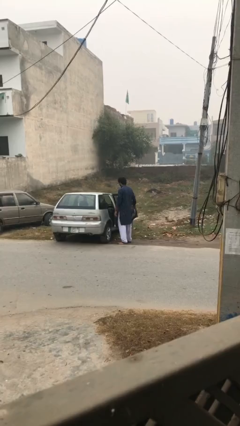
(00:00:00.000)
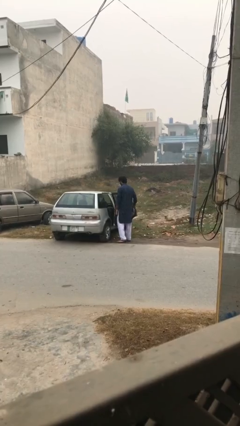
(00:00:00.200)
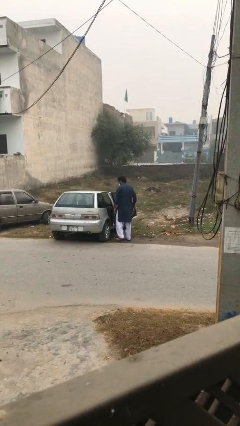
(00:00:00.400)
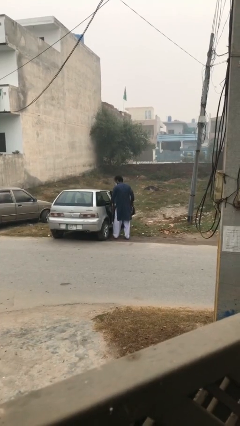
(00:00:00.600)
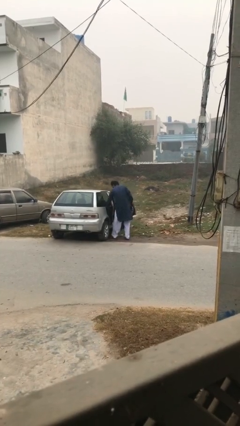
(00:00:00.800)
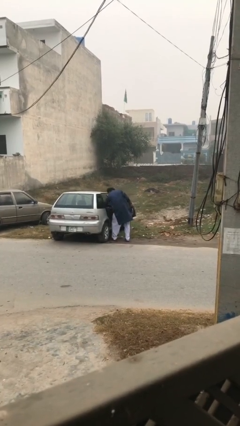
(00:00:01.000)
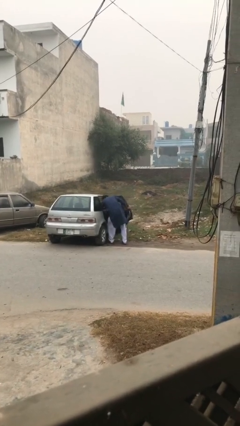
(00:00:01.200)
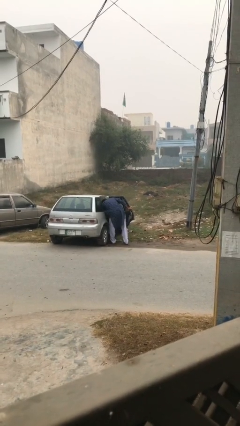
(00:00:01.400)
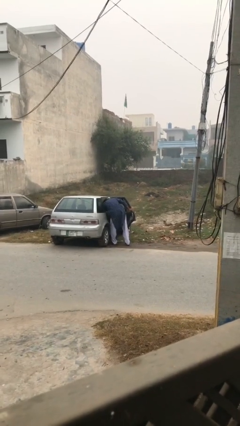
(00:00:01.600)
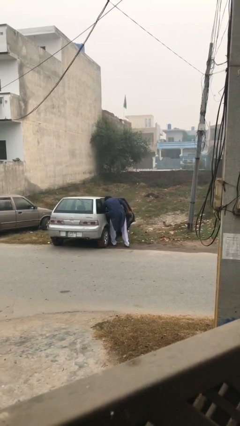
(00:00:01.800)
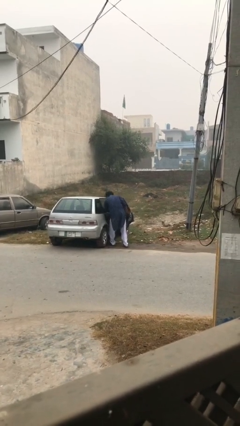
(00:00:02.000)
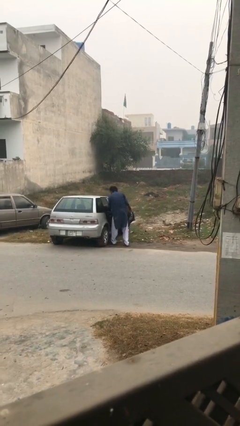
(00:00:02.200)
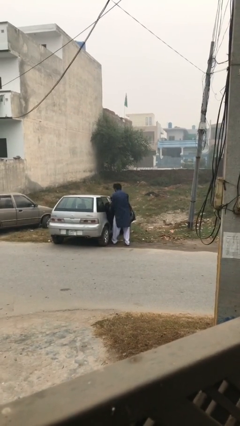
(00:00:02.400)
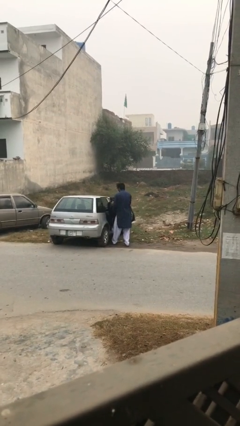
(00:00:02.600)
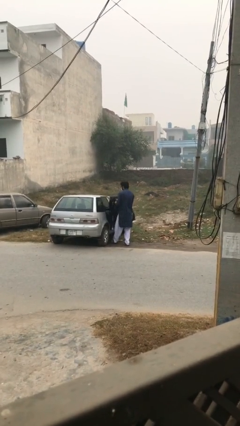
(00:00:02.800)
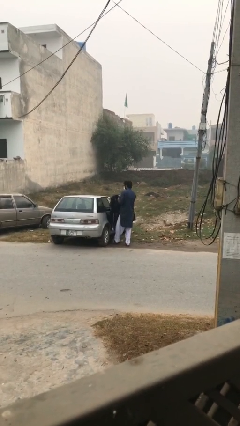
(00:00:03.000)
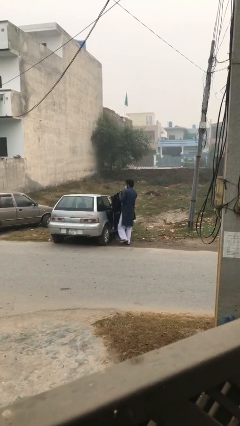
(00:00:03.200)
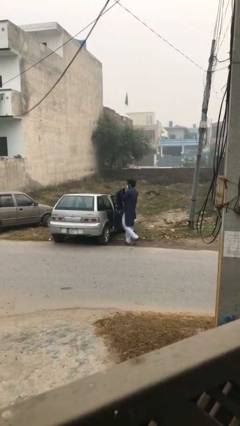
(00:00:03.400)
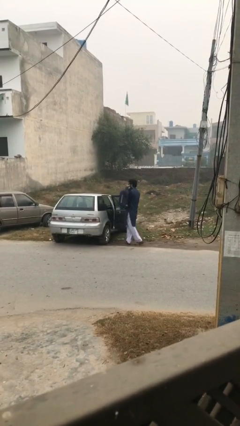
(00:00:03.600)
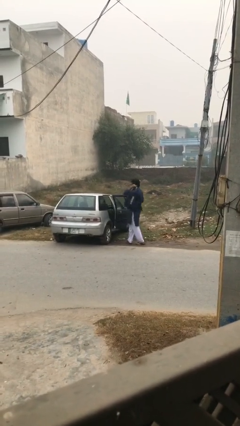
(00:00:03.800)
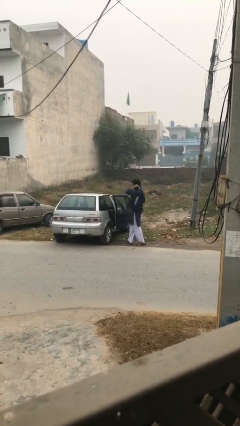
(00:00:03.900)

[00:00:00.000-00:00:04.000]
person unloads car

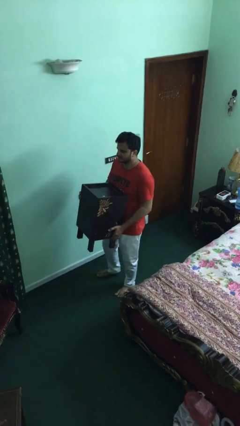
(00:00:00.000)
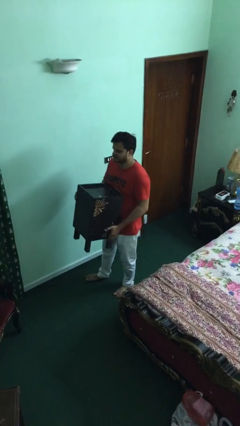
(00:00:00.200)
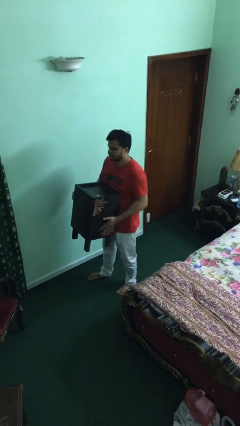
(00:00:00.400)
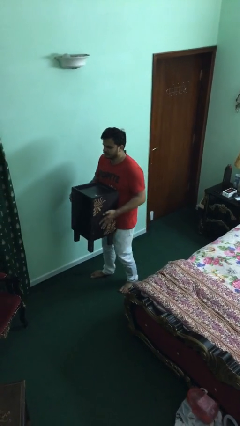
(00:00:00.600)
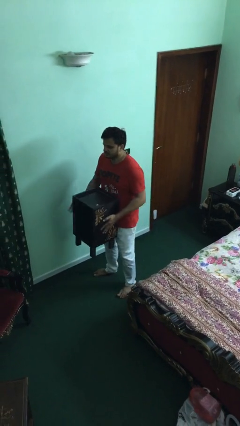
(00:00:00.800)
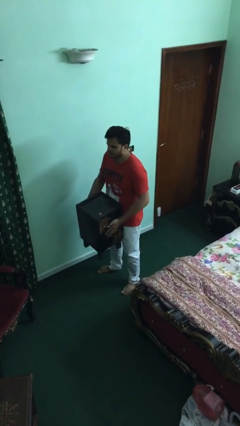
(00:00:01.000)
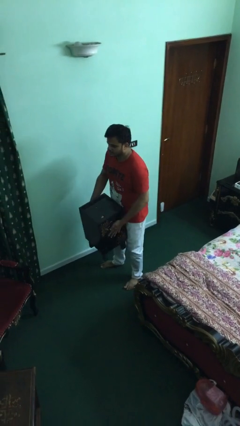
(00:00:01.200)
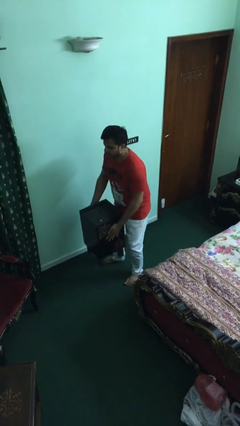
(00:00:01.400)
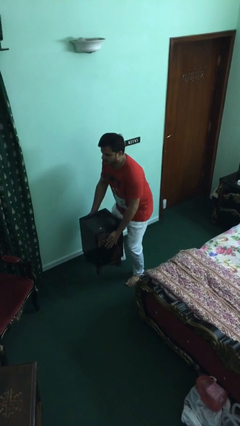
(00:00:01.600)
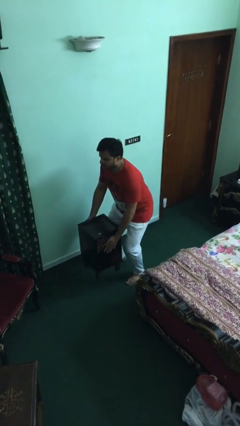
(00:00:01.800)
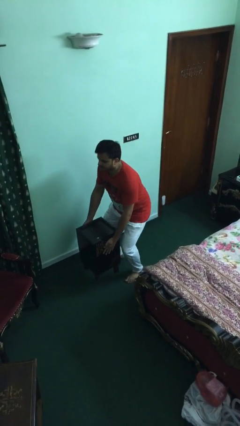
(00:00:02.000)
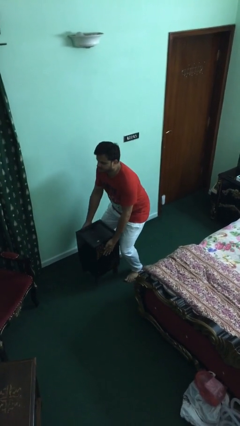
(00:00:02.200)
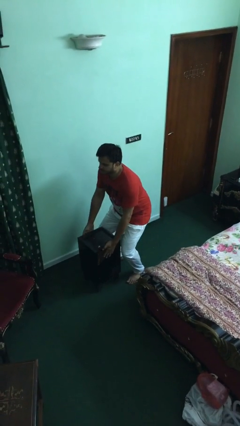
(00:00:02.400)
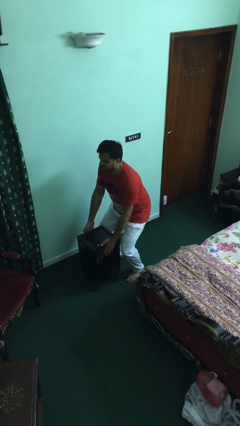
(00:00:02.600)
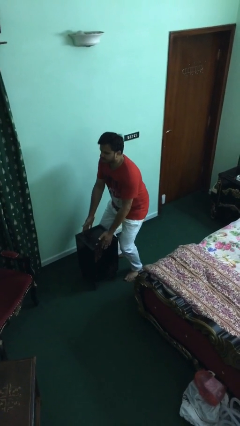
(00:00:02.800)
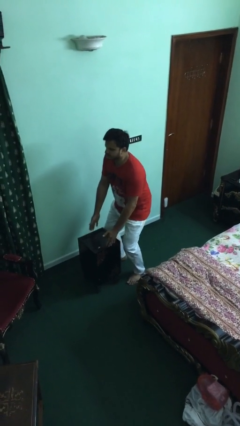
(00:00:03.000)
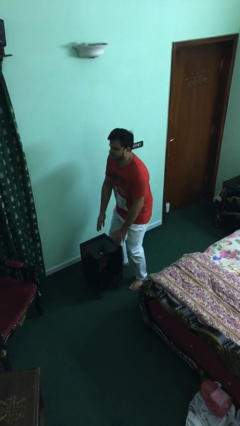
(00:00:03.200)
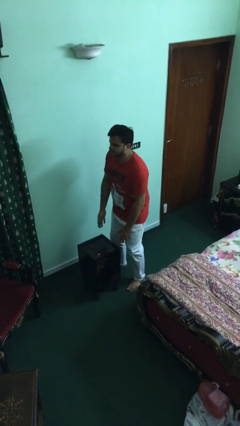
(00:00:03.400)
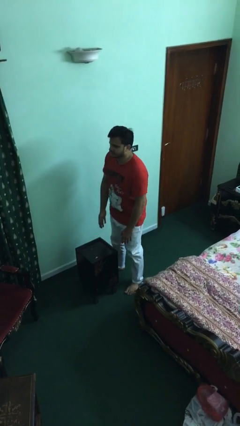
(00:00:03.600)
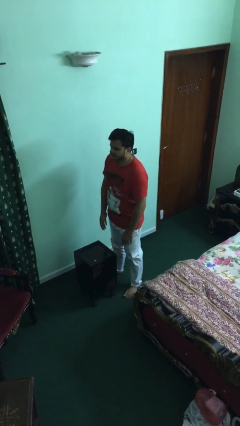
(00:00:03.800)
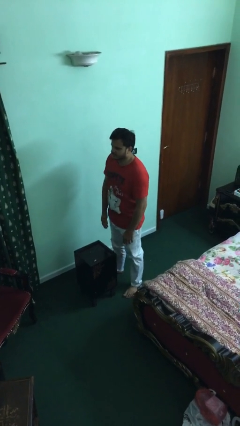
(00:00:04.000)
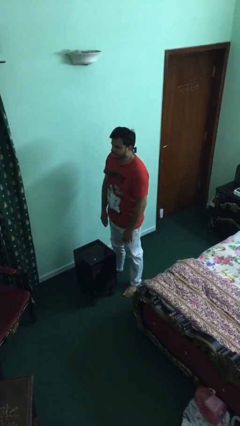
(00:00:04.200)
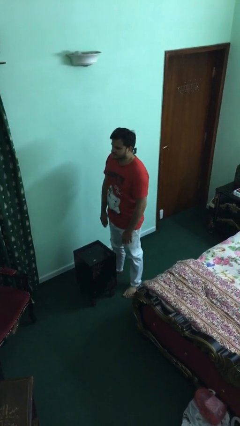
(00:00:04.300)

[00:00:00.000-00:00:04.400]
person puts down object on floor

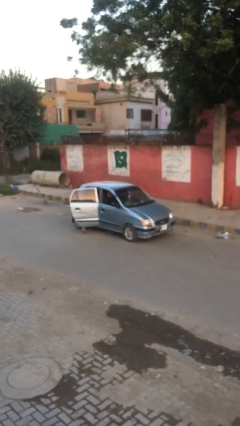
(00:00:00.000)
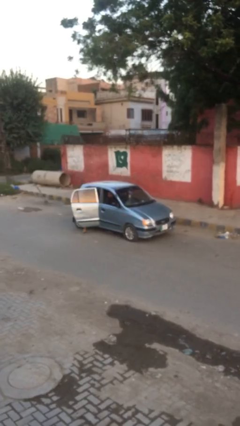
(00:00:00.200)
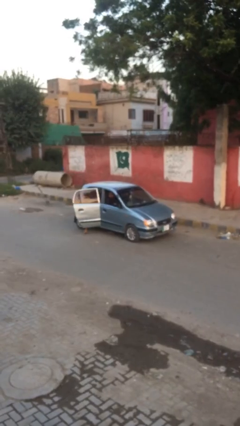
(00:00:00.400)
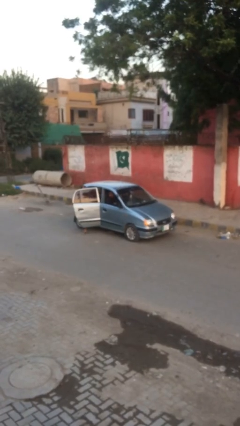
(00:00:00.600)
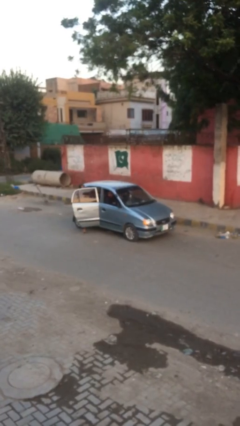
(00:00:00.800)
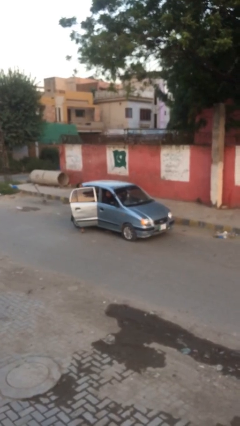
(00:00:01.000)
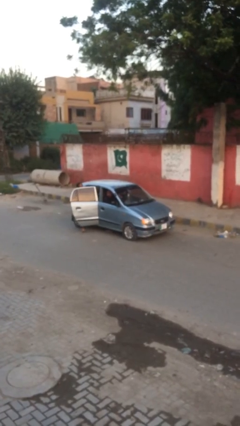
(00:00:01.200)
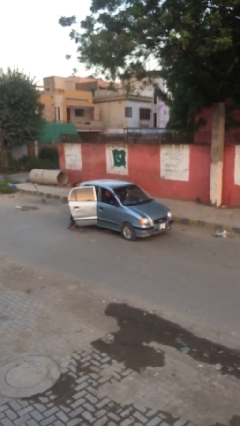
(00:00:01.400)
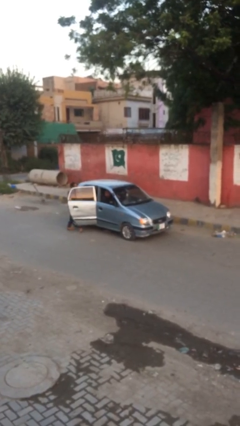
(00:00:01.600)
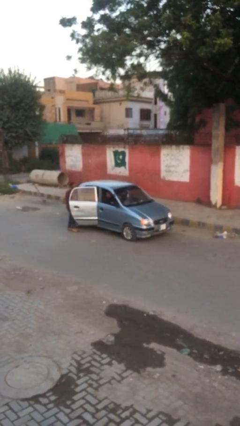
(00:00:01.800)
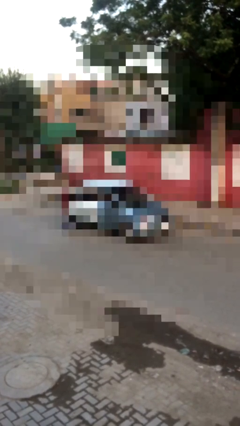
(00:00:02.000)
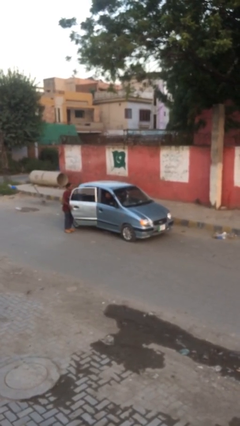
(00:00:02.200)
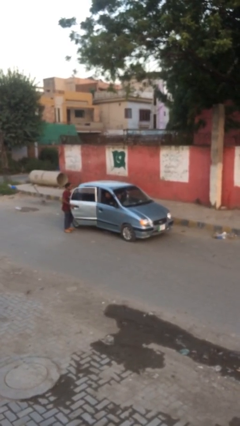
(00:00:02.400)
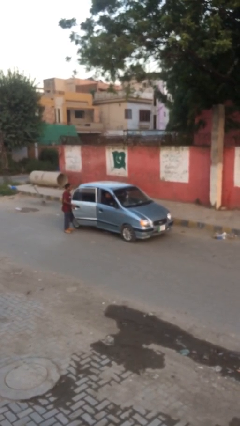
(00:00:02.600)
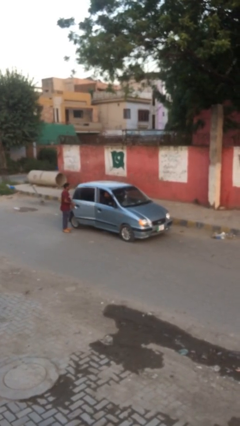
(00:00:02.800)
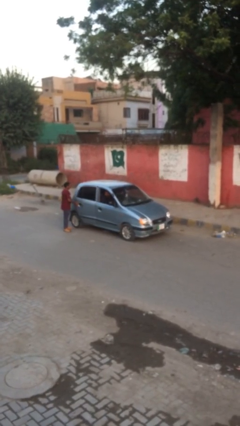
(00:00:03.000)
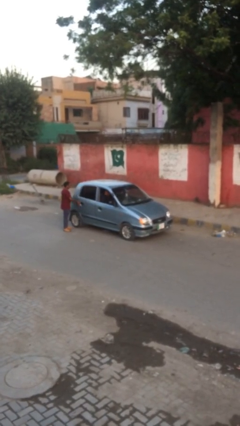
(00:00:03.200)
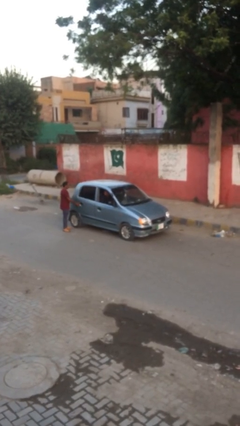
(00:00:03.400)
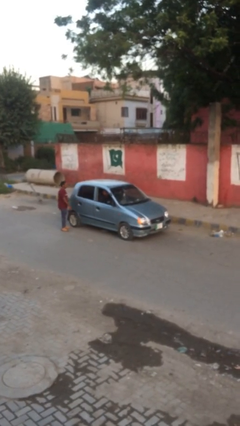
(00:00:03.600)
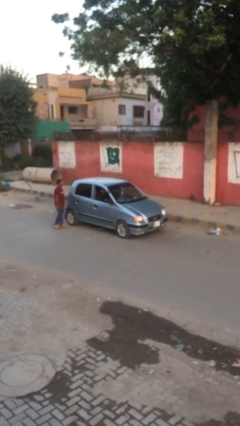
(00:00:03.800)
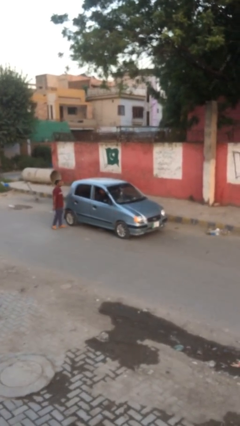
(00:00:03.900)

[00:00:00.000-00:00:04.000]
car drops off person

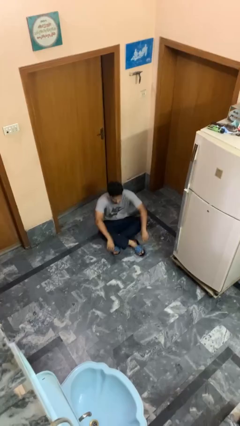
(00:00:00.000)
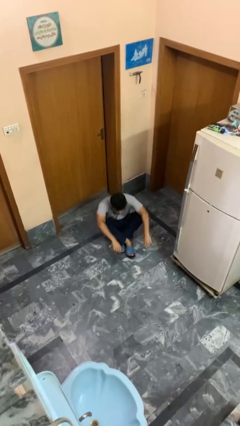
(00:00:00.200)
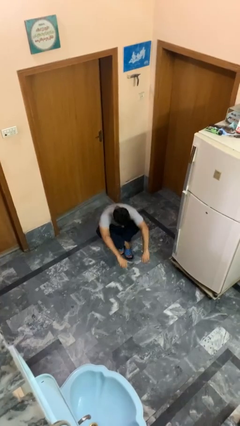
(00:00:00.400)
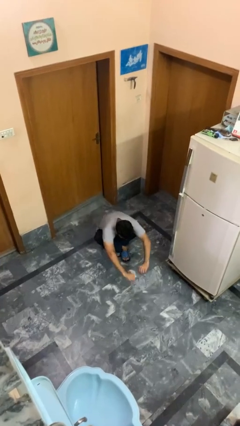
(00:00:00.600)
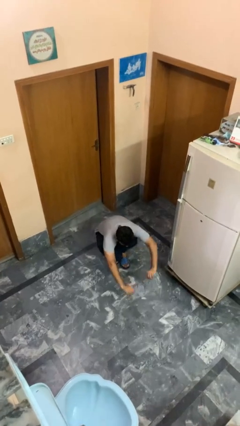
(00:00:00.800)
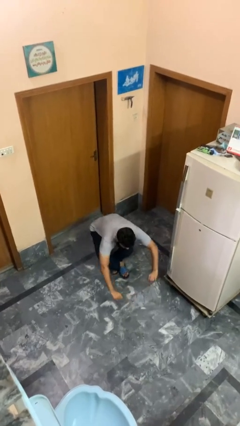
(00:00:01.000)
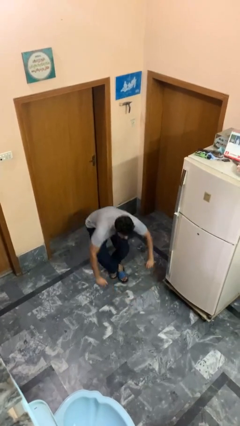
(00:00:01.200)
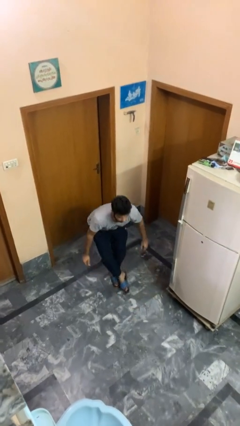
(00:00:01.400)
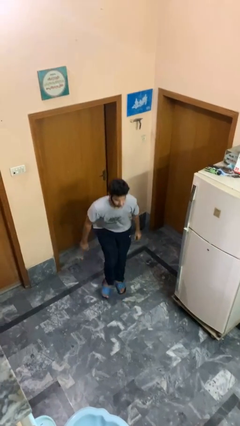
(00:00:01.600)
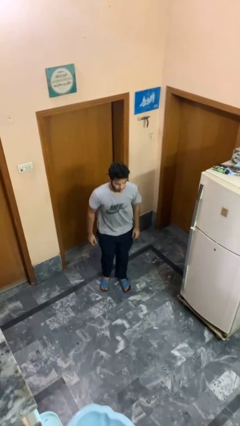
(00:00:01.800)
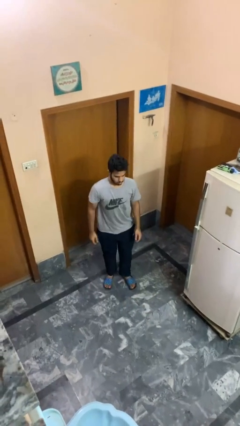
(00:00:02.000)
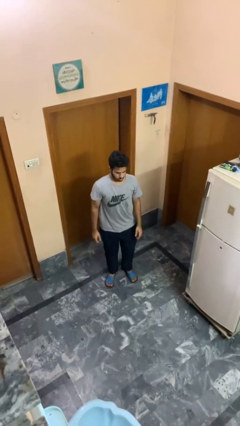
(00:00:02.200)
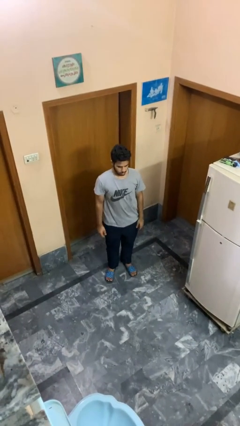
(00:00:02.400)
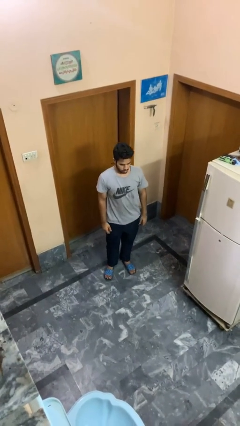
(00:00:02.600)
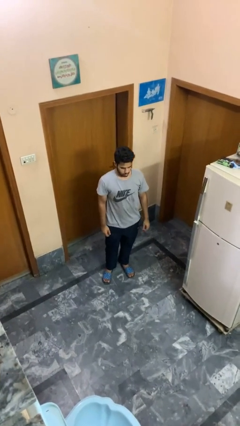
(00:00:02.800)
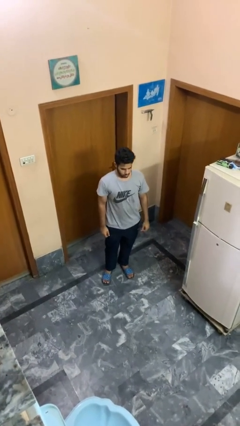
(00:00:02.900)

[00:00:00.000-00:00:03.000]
person stands up from floor

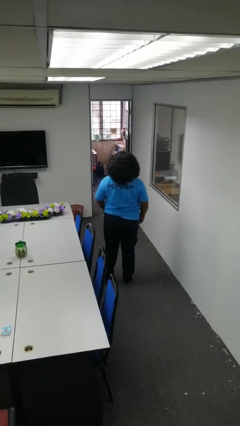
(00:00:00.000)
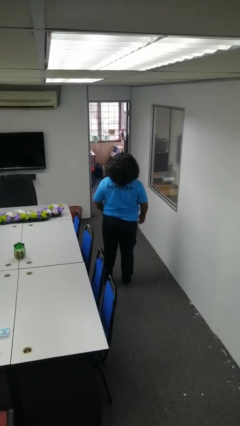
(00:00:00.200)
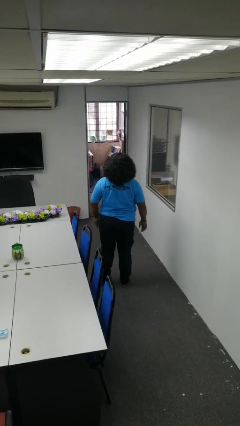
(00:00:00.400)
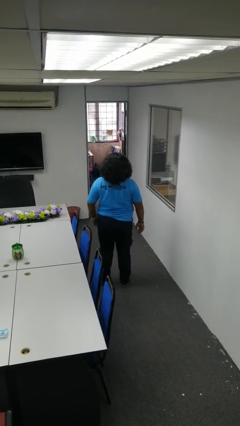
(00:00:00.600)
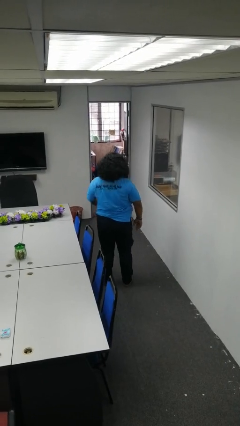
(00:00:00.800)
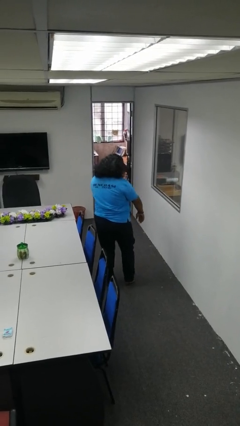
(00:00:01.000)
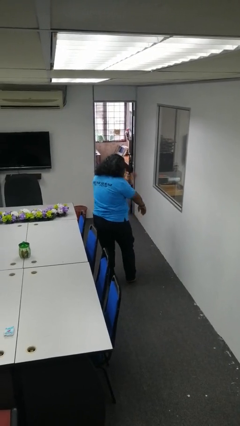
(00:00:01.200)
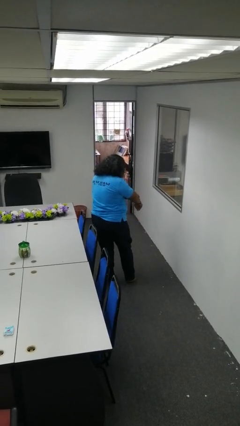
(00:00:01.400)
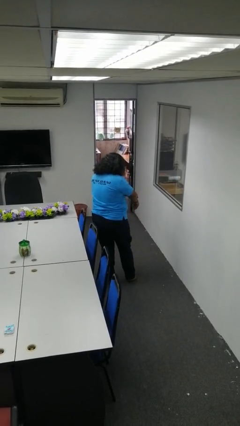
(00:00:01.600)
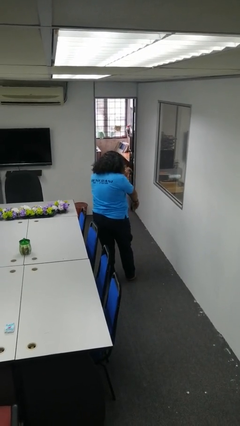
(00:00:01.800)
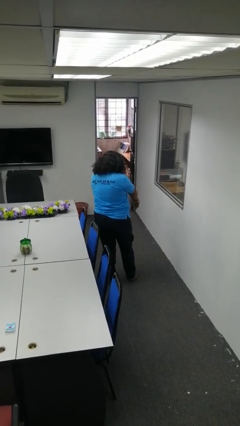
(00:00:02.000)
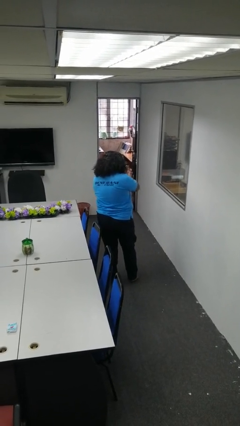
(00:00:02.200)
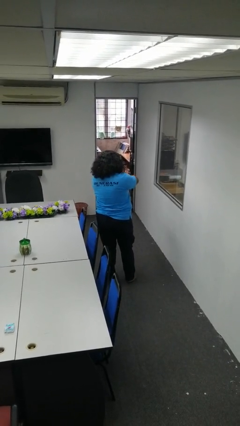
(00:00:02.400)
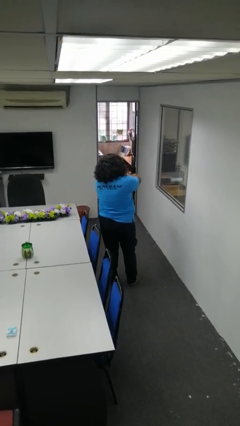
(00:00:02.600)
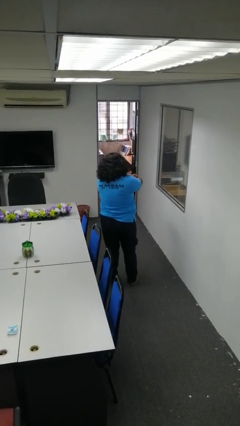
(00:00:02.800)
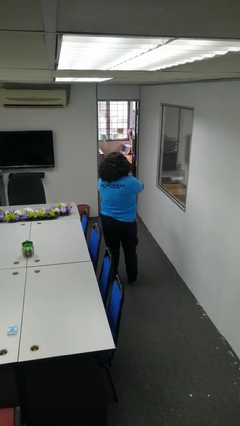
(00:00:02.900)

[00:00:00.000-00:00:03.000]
person swats bug
